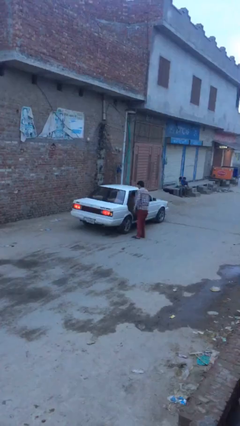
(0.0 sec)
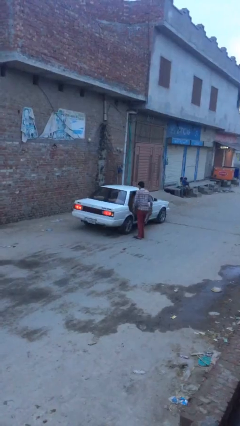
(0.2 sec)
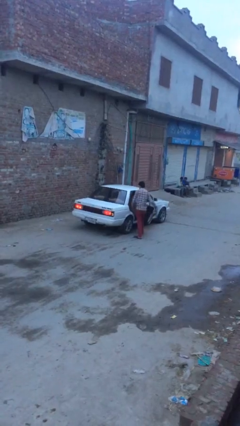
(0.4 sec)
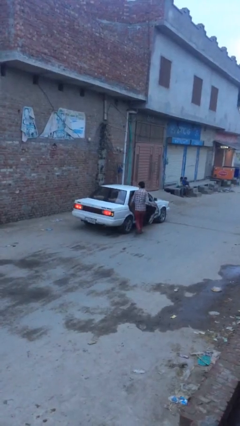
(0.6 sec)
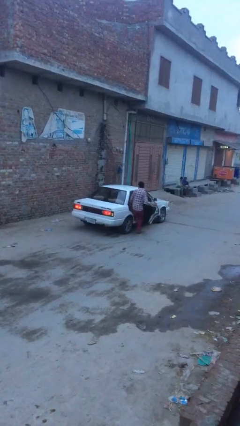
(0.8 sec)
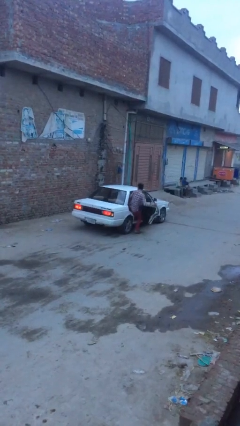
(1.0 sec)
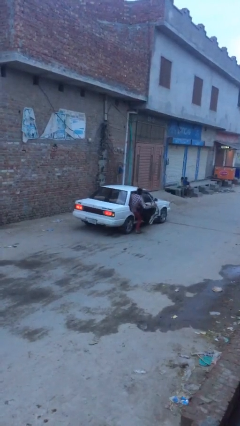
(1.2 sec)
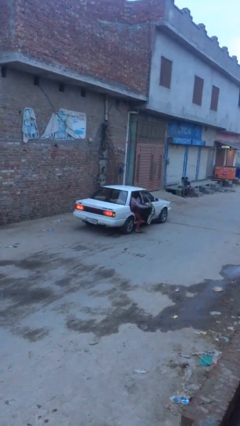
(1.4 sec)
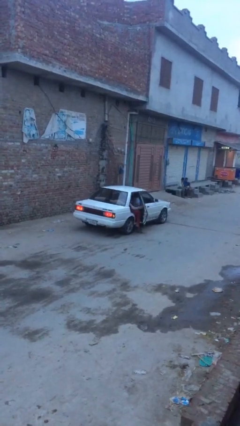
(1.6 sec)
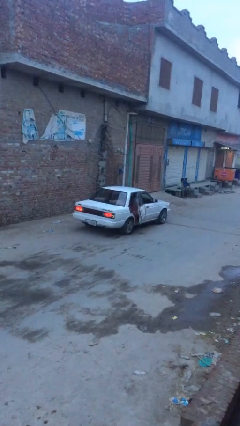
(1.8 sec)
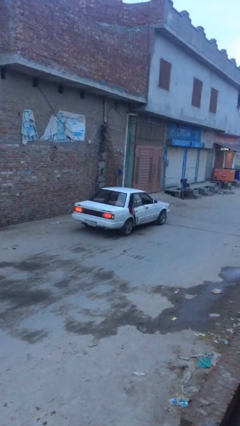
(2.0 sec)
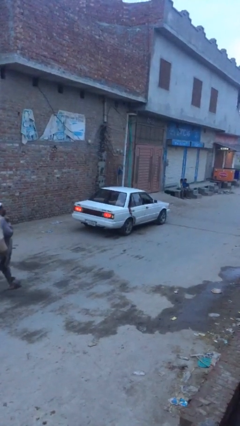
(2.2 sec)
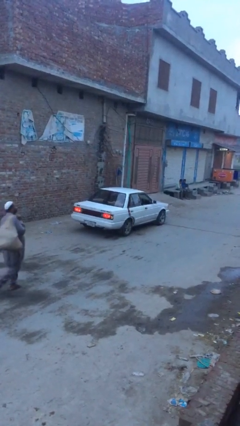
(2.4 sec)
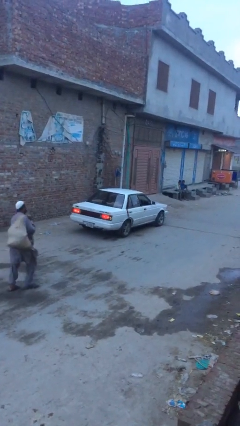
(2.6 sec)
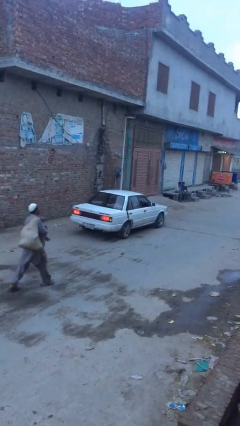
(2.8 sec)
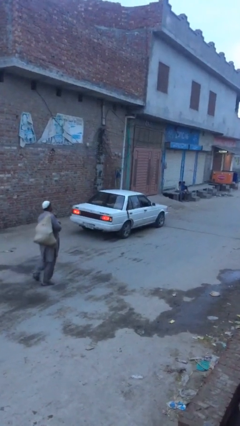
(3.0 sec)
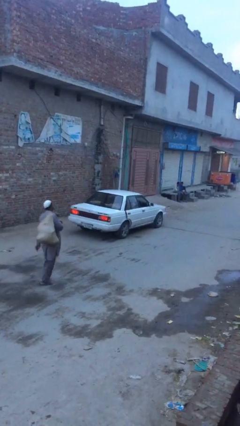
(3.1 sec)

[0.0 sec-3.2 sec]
car picks up person

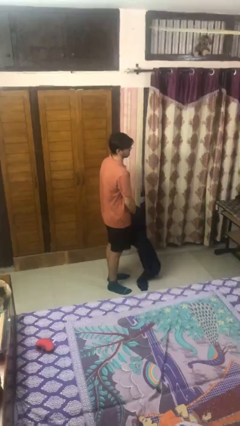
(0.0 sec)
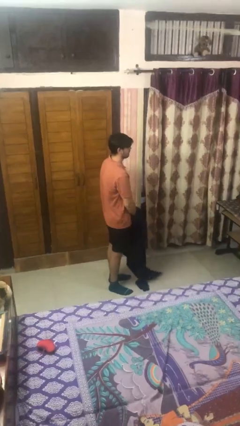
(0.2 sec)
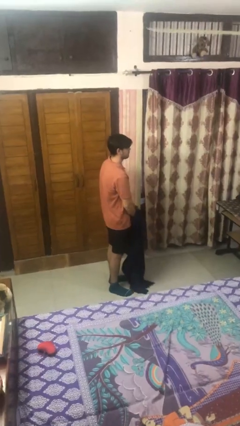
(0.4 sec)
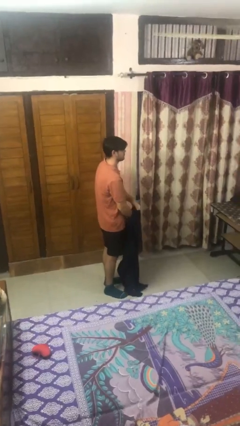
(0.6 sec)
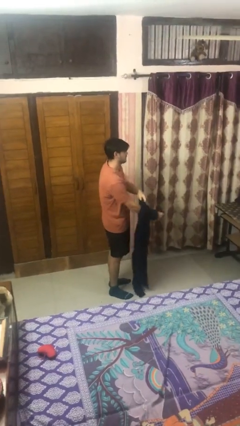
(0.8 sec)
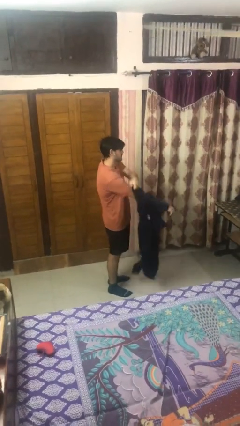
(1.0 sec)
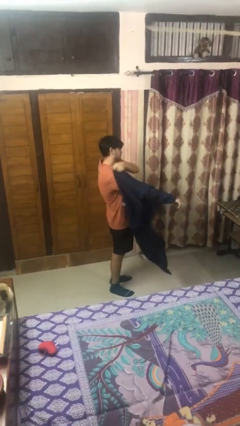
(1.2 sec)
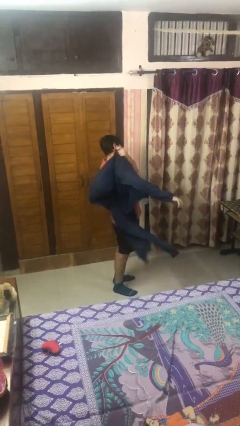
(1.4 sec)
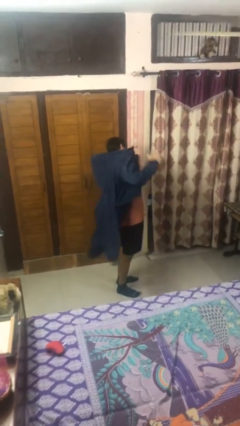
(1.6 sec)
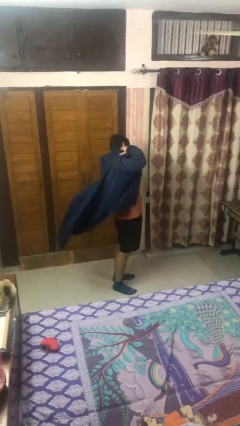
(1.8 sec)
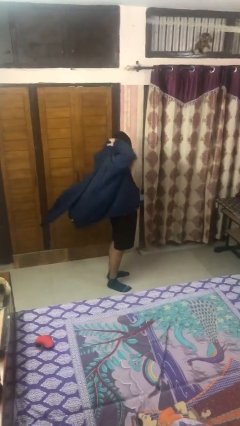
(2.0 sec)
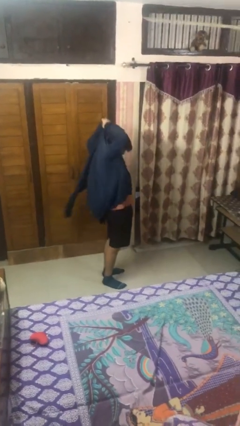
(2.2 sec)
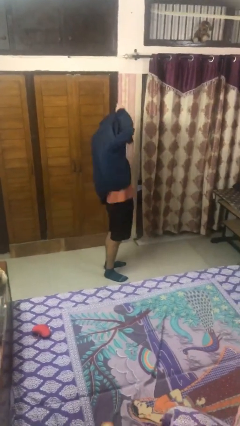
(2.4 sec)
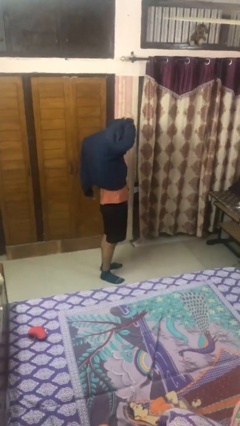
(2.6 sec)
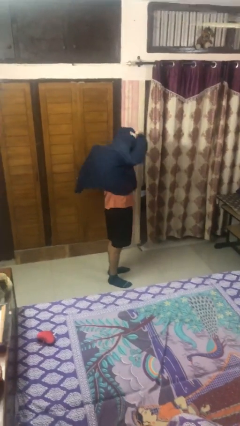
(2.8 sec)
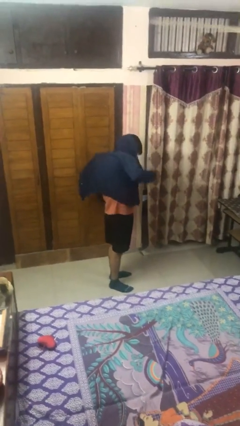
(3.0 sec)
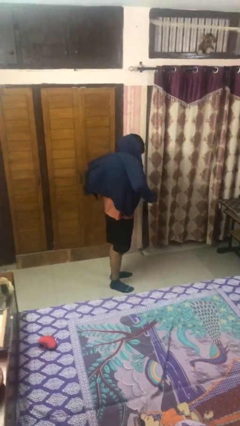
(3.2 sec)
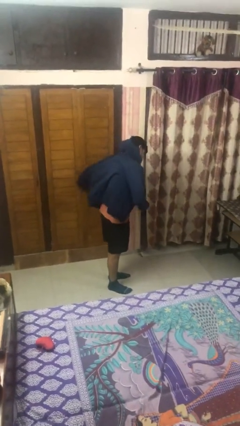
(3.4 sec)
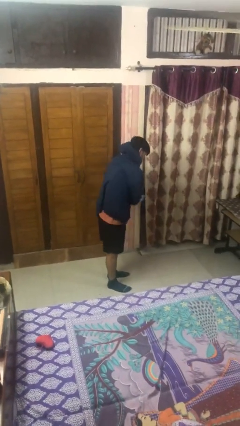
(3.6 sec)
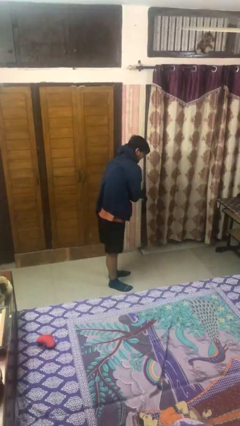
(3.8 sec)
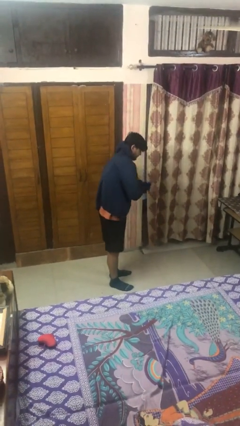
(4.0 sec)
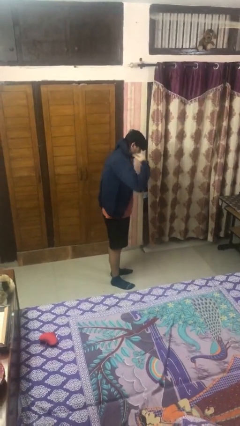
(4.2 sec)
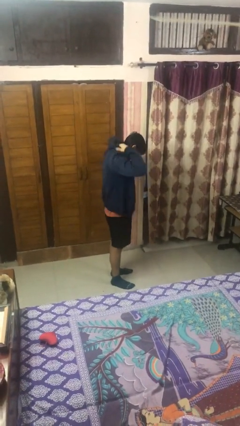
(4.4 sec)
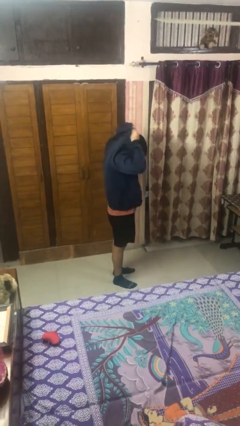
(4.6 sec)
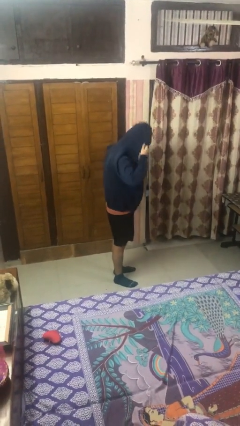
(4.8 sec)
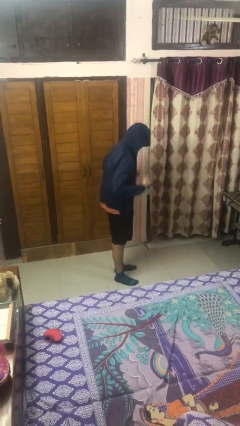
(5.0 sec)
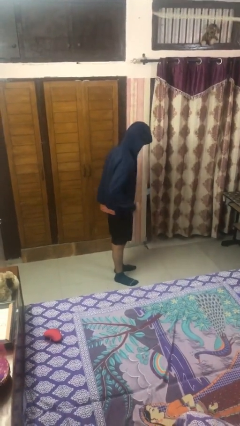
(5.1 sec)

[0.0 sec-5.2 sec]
person puts on hoodie

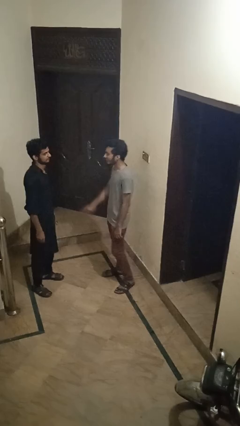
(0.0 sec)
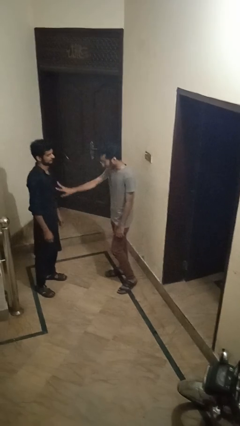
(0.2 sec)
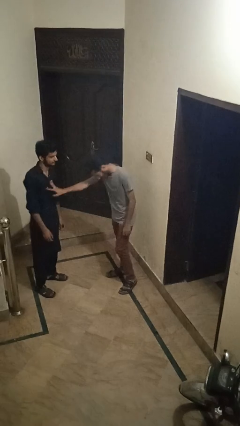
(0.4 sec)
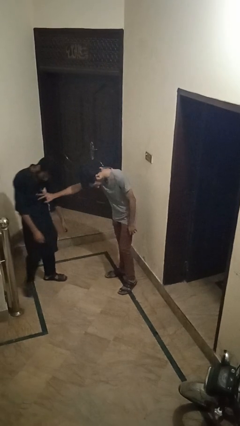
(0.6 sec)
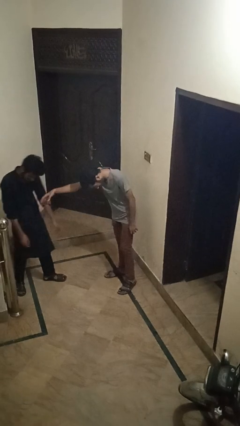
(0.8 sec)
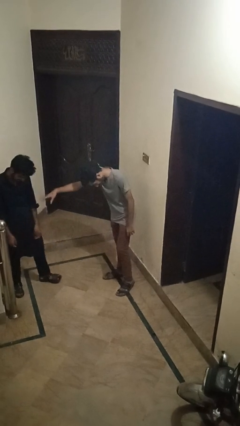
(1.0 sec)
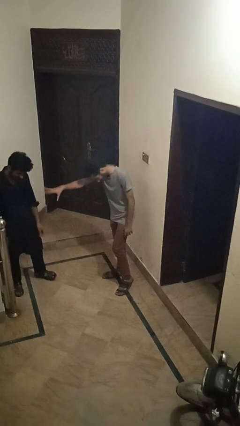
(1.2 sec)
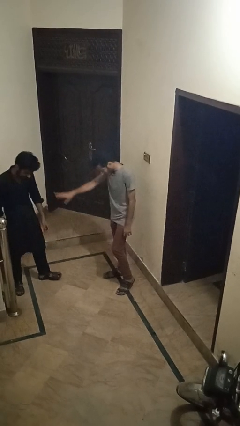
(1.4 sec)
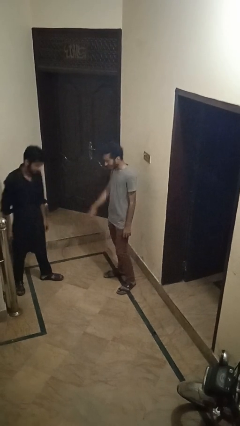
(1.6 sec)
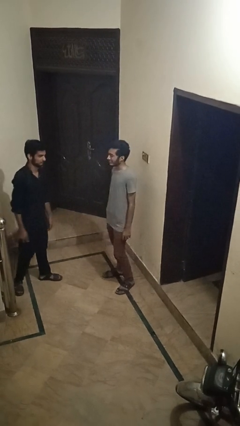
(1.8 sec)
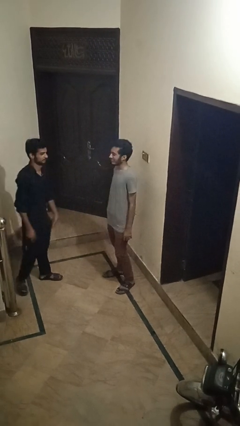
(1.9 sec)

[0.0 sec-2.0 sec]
person shoves person

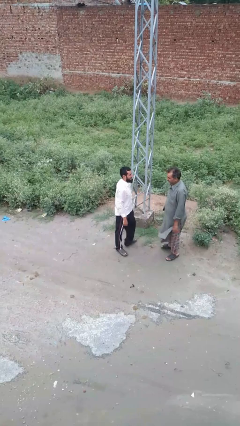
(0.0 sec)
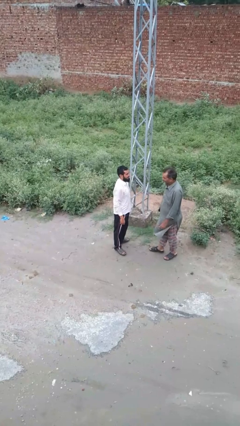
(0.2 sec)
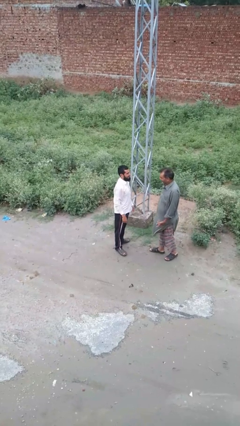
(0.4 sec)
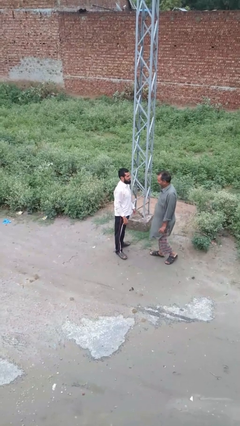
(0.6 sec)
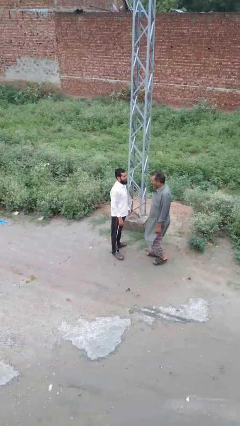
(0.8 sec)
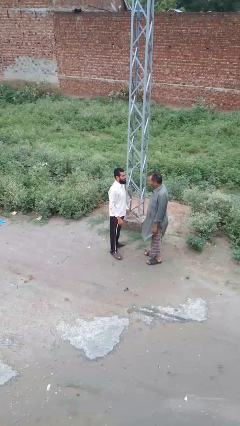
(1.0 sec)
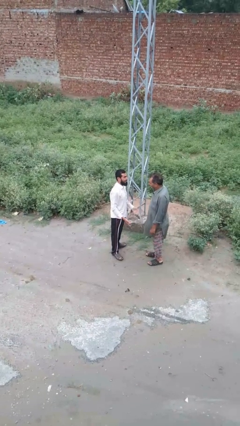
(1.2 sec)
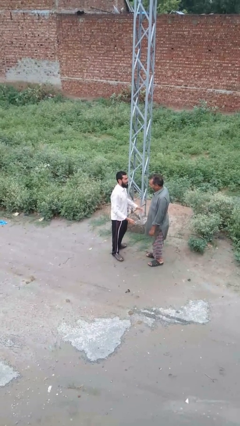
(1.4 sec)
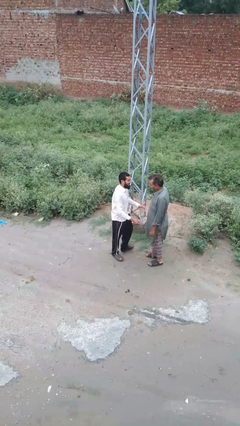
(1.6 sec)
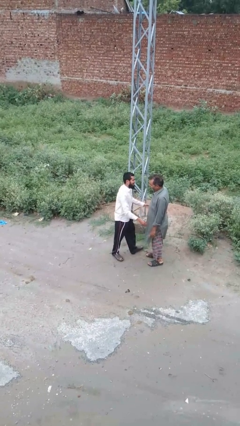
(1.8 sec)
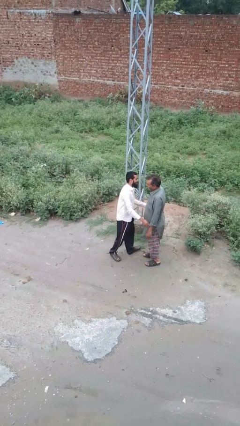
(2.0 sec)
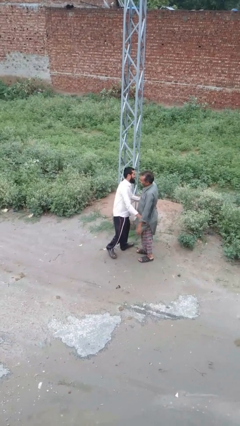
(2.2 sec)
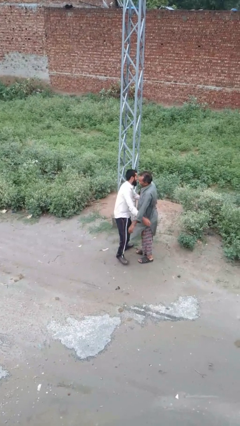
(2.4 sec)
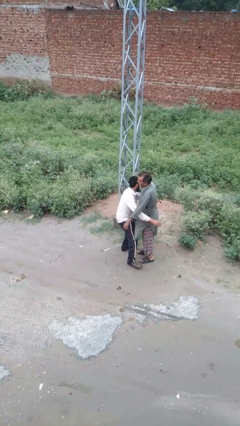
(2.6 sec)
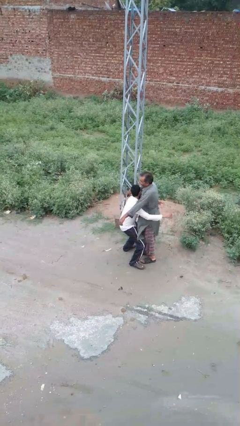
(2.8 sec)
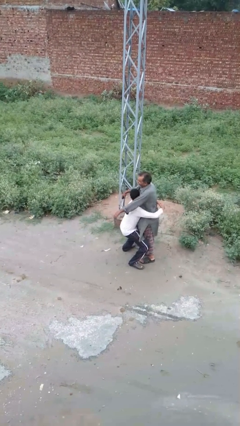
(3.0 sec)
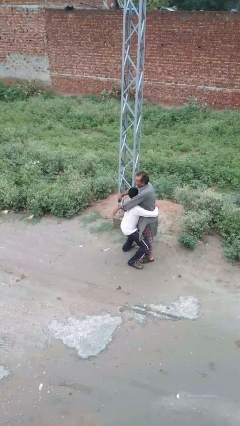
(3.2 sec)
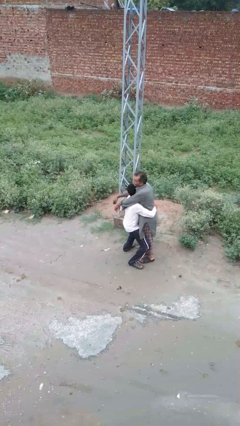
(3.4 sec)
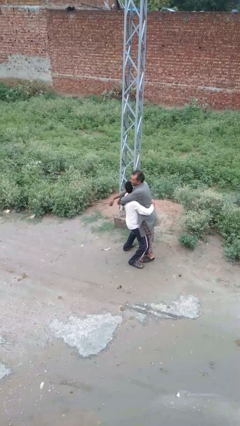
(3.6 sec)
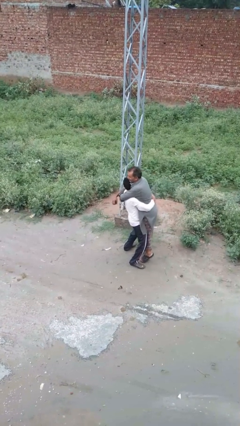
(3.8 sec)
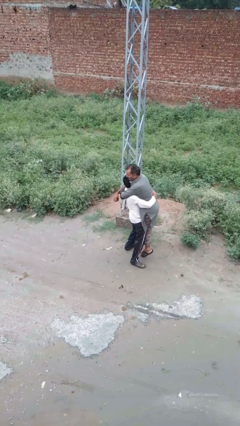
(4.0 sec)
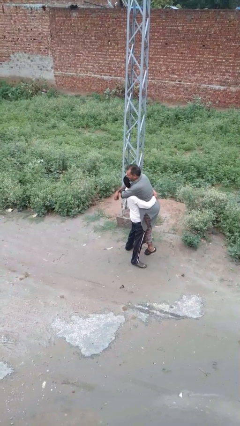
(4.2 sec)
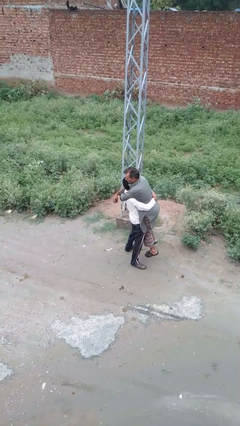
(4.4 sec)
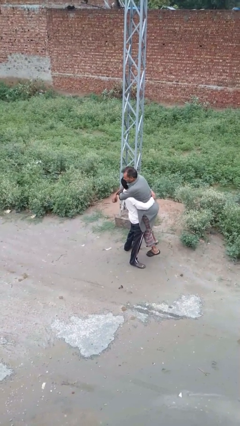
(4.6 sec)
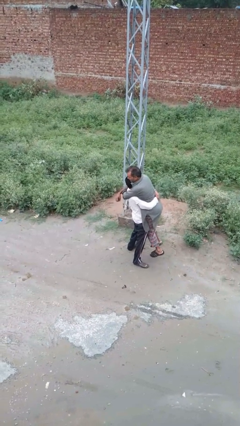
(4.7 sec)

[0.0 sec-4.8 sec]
person picks up person

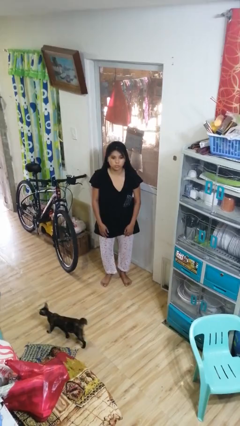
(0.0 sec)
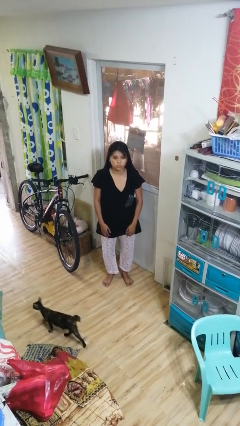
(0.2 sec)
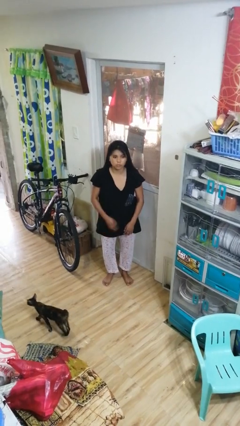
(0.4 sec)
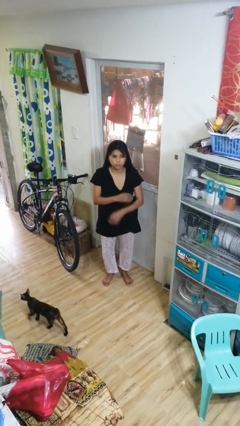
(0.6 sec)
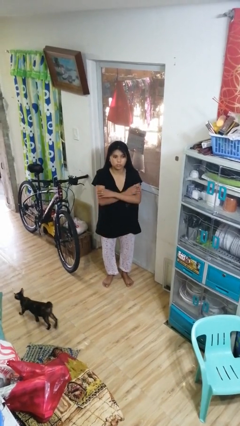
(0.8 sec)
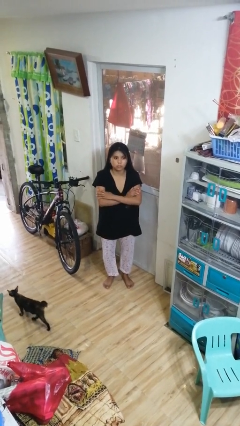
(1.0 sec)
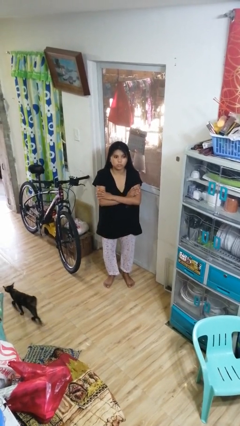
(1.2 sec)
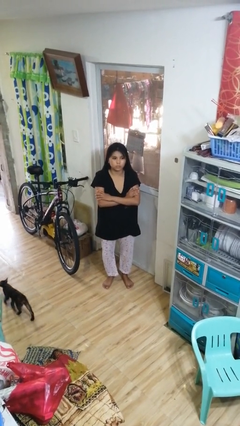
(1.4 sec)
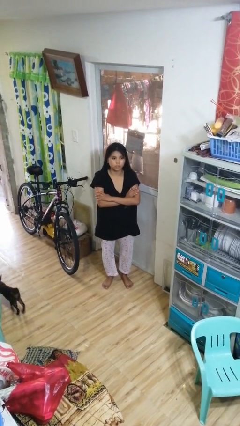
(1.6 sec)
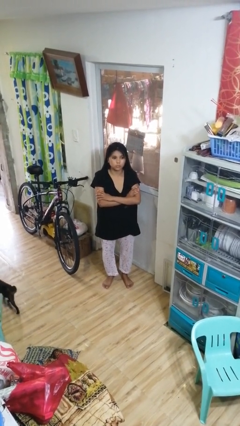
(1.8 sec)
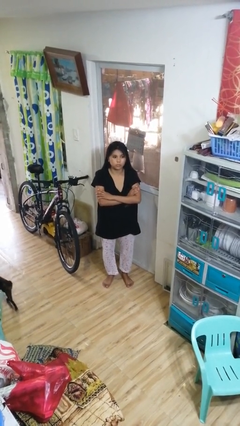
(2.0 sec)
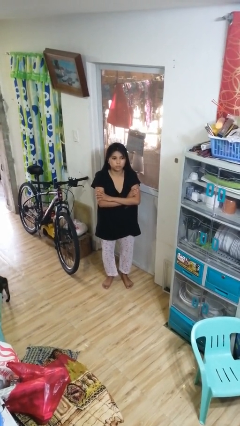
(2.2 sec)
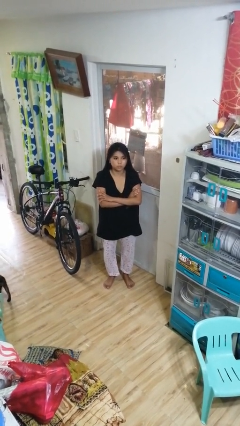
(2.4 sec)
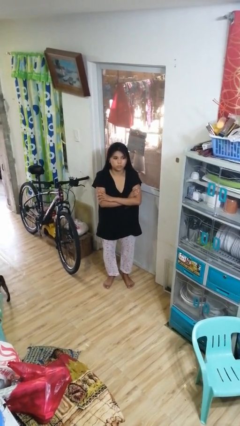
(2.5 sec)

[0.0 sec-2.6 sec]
person crosses arms
